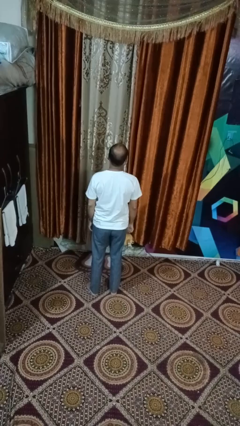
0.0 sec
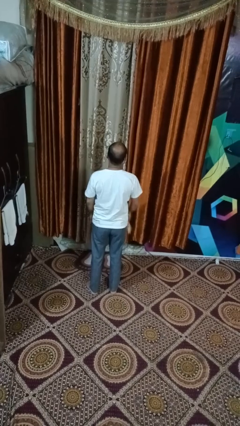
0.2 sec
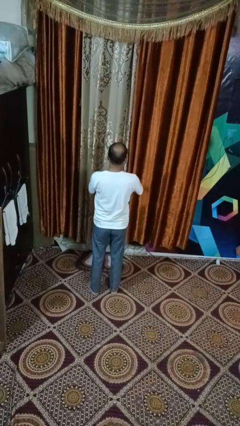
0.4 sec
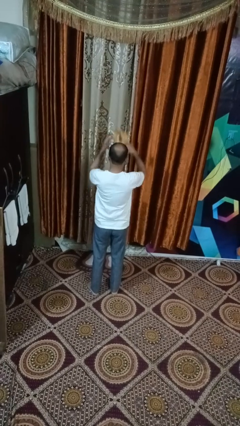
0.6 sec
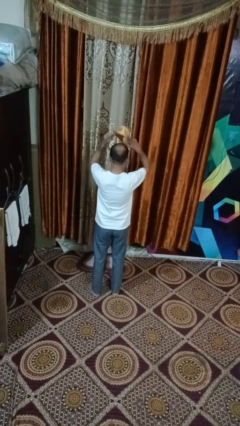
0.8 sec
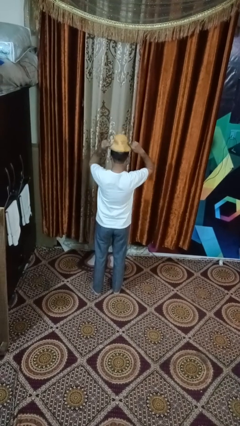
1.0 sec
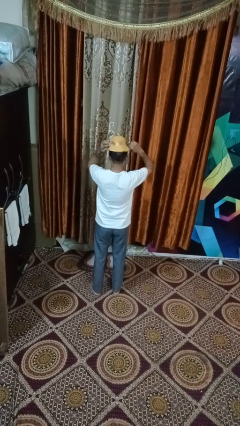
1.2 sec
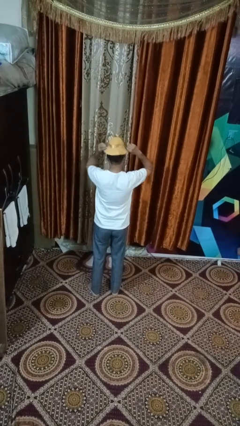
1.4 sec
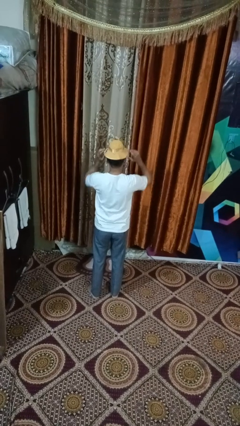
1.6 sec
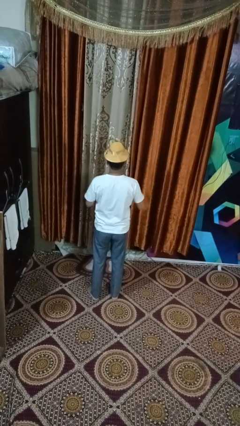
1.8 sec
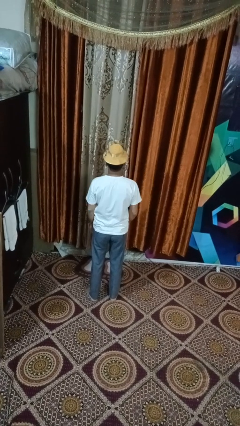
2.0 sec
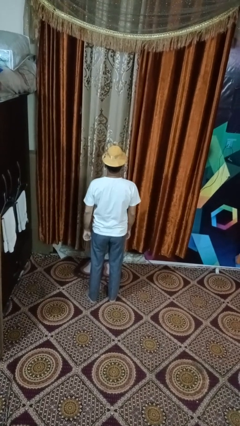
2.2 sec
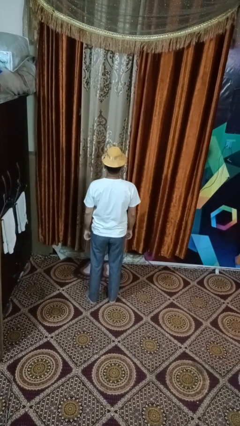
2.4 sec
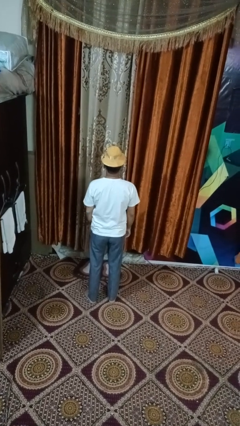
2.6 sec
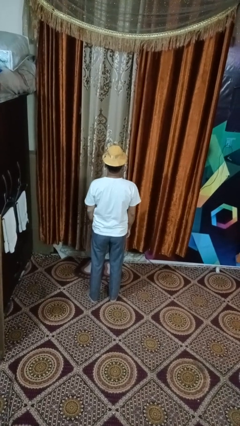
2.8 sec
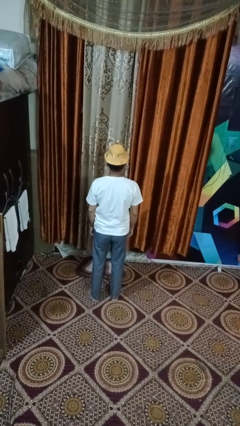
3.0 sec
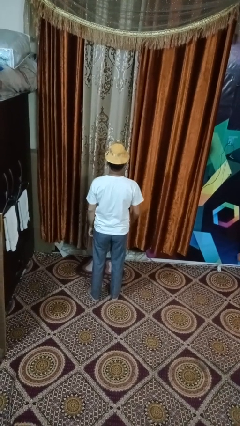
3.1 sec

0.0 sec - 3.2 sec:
person puts on hat

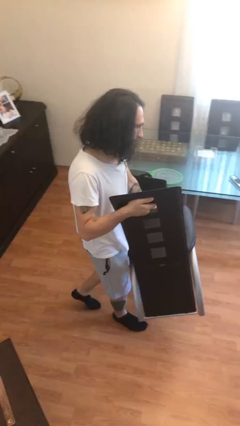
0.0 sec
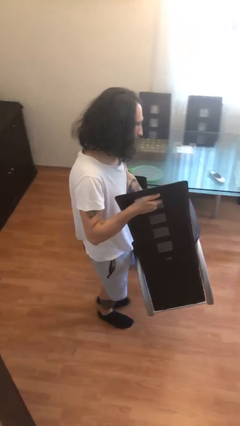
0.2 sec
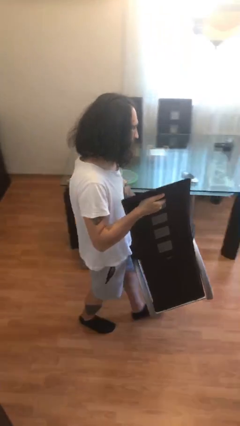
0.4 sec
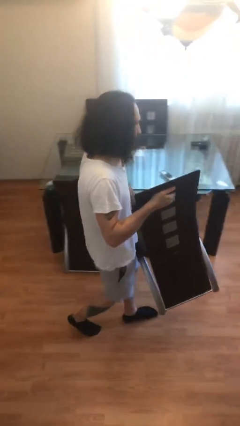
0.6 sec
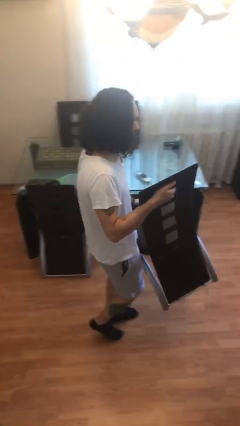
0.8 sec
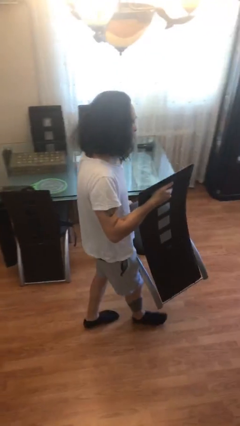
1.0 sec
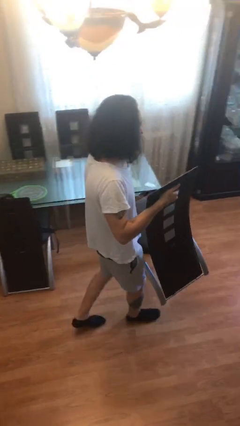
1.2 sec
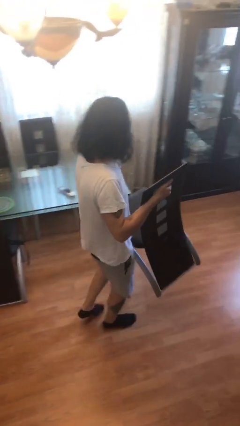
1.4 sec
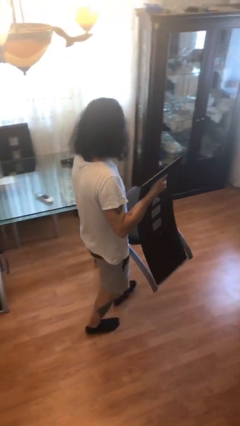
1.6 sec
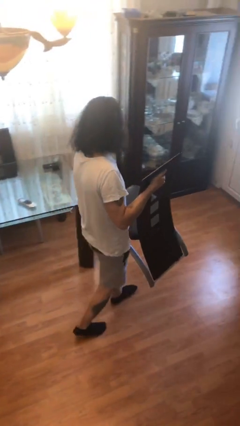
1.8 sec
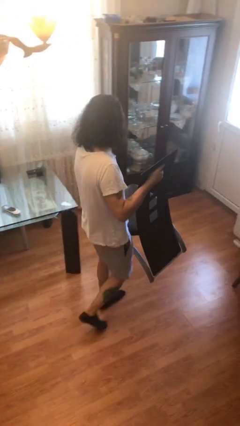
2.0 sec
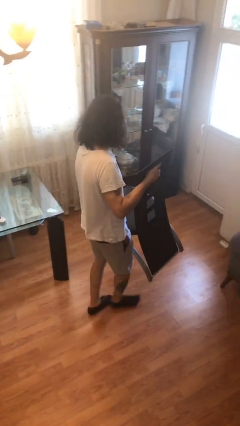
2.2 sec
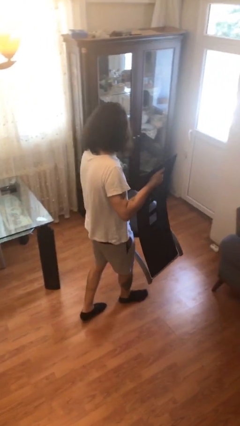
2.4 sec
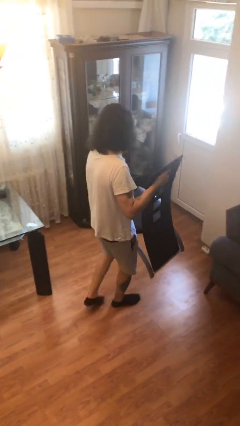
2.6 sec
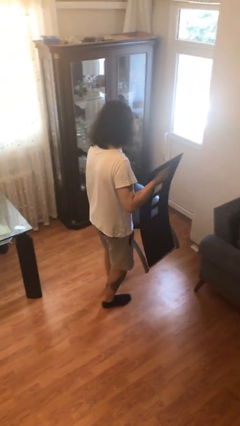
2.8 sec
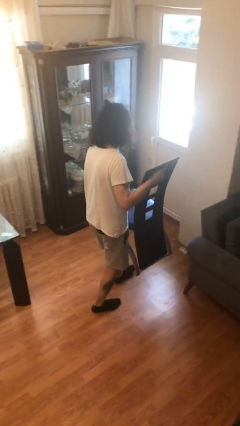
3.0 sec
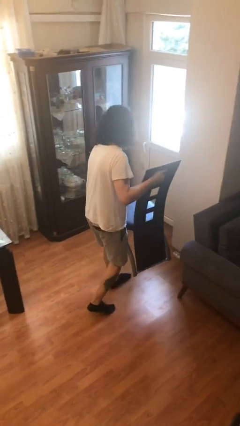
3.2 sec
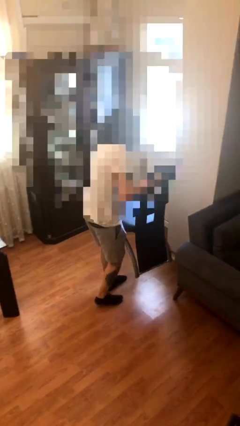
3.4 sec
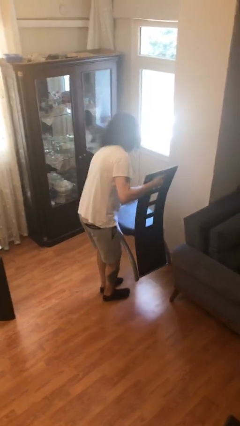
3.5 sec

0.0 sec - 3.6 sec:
person carries heavy object

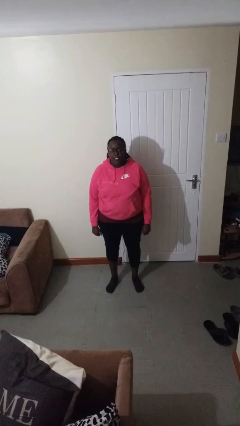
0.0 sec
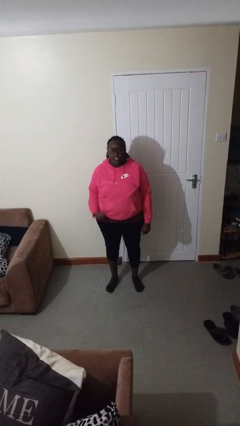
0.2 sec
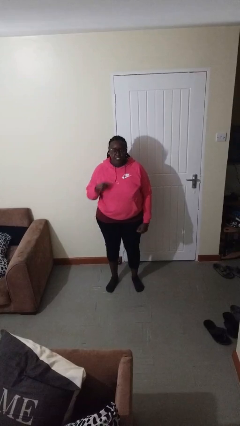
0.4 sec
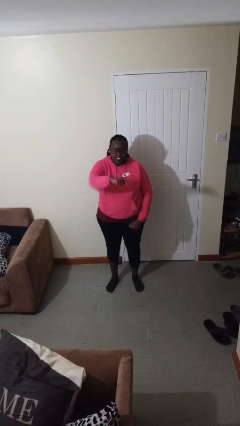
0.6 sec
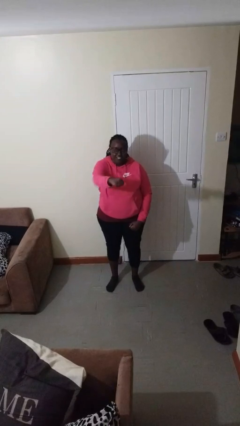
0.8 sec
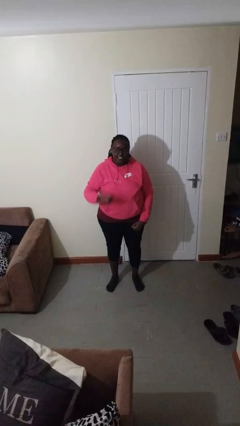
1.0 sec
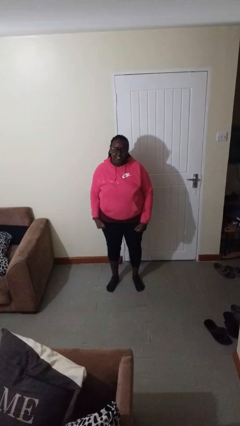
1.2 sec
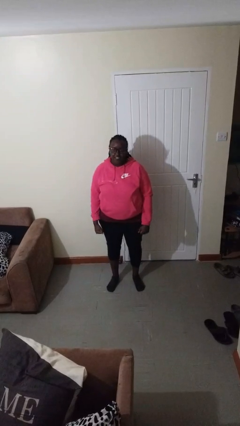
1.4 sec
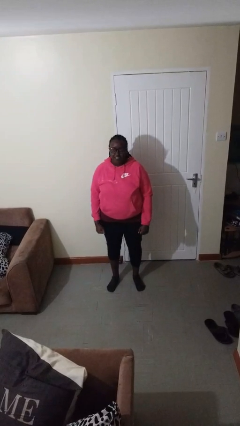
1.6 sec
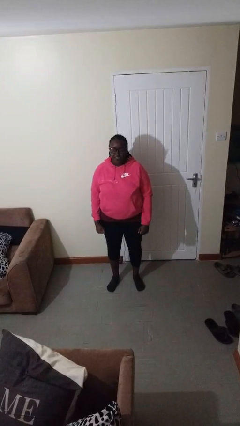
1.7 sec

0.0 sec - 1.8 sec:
person punches

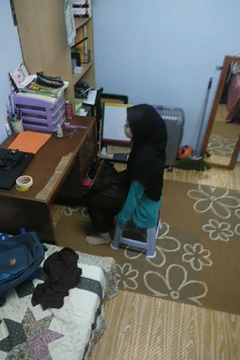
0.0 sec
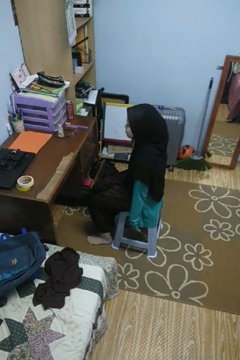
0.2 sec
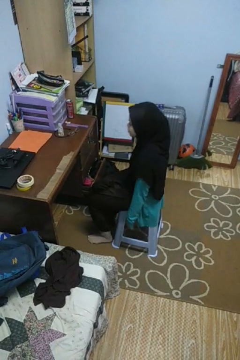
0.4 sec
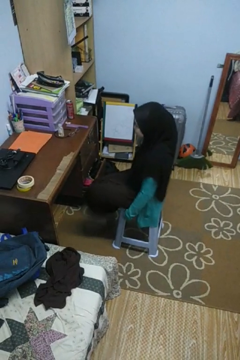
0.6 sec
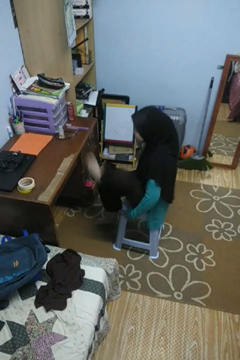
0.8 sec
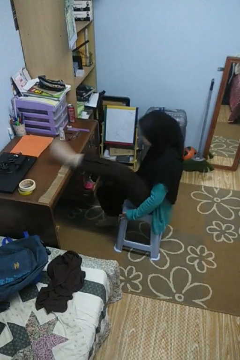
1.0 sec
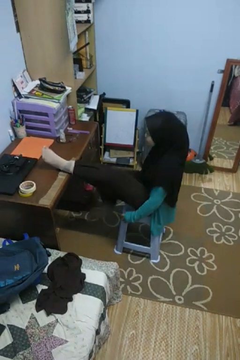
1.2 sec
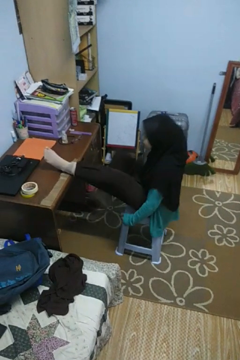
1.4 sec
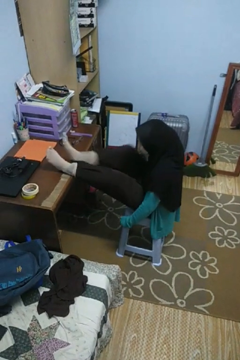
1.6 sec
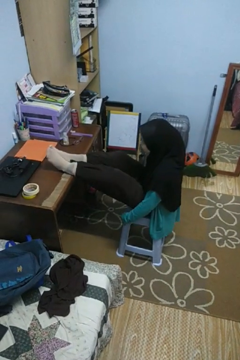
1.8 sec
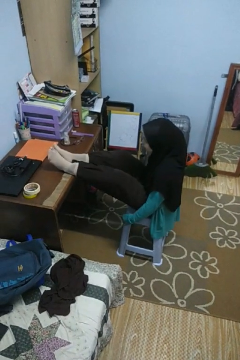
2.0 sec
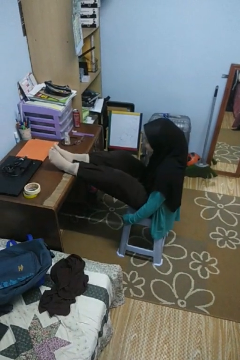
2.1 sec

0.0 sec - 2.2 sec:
person puts feet up

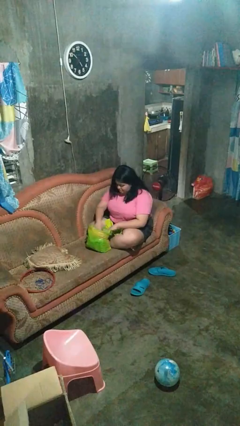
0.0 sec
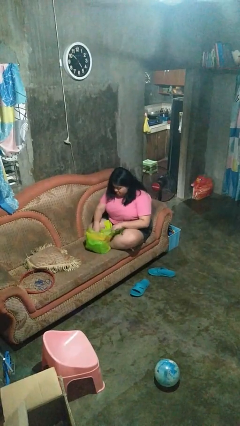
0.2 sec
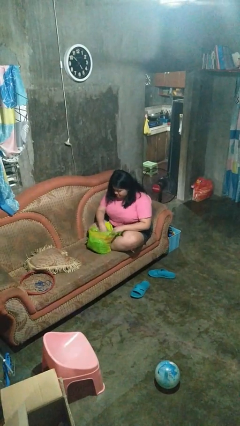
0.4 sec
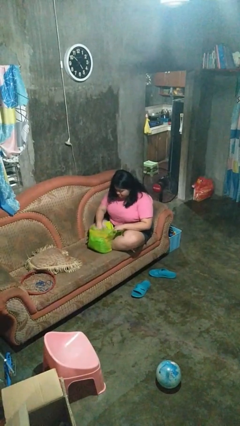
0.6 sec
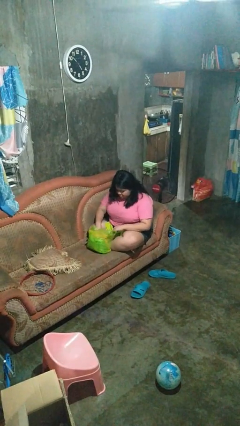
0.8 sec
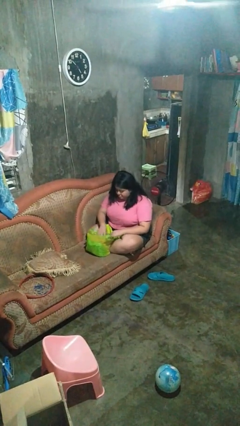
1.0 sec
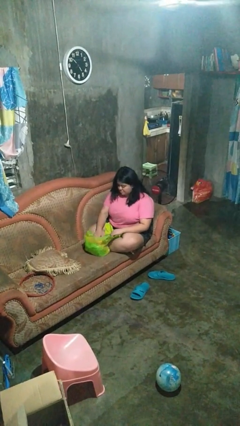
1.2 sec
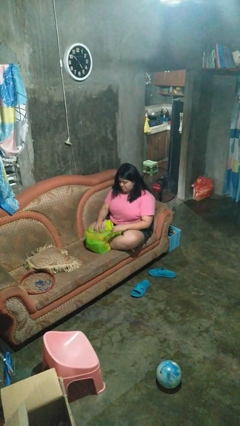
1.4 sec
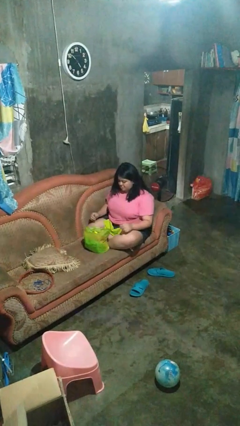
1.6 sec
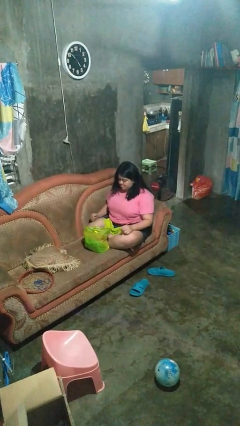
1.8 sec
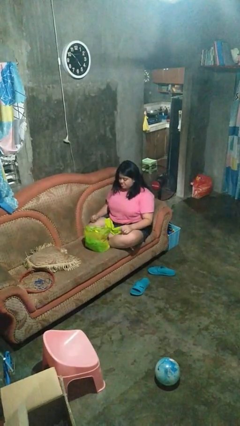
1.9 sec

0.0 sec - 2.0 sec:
person searches in bag

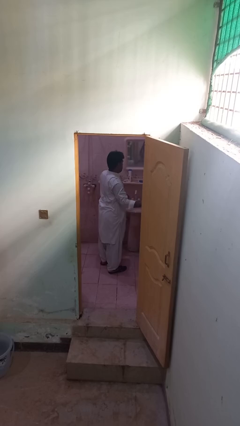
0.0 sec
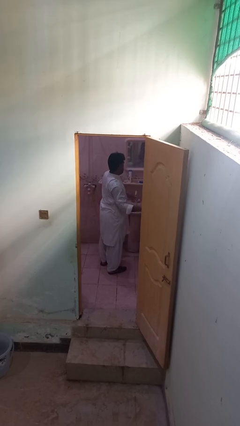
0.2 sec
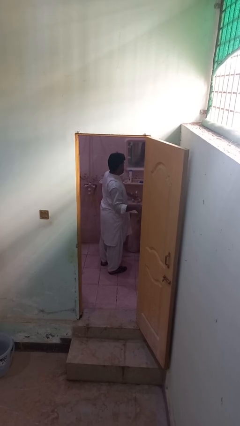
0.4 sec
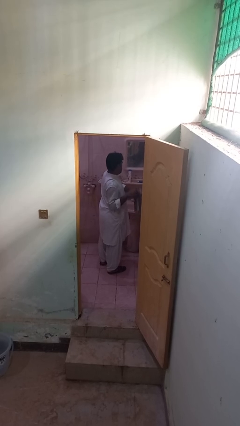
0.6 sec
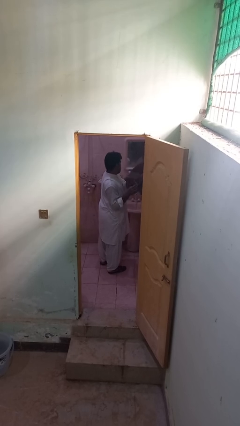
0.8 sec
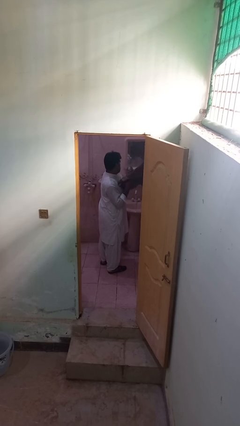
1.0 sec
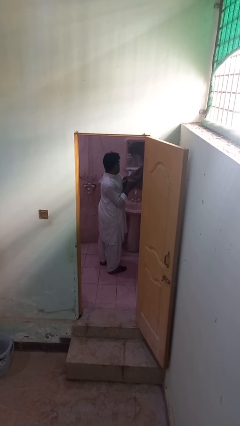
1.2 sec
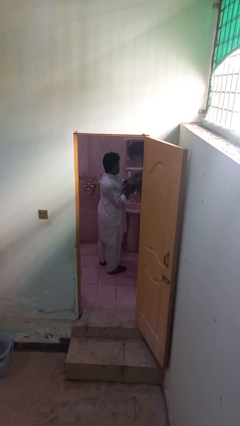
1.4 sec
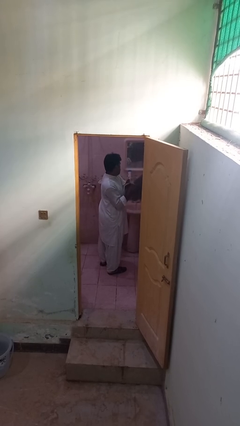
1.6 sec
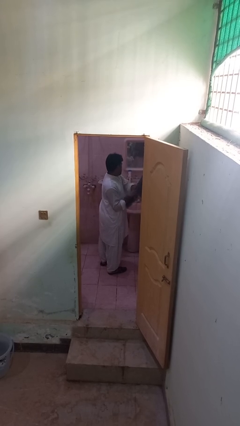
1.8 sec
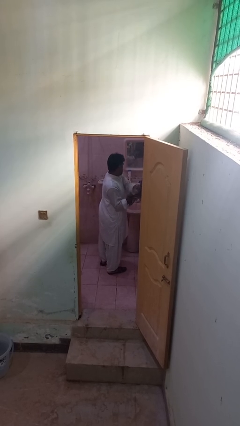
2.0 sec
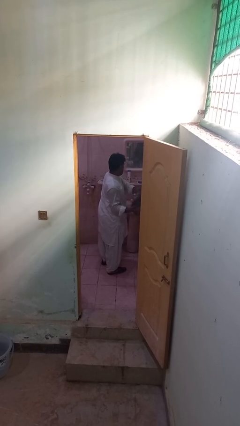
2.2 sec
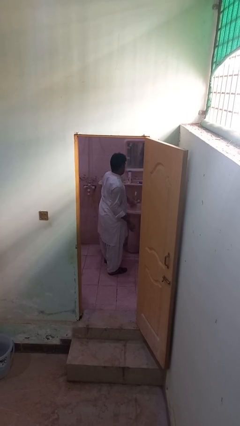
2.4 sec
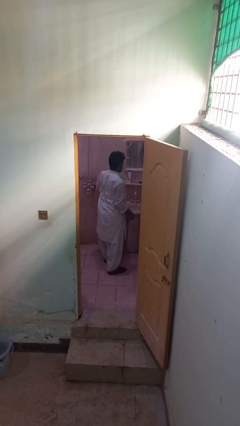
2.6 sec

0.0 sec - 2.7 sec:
person dries hands with towel

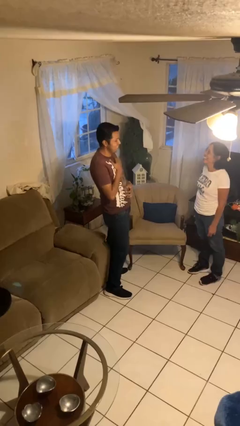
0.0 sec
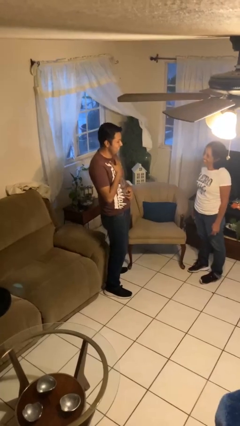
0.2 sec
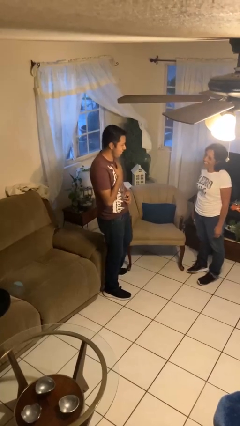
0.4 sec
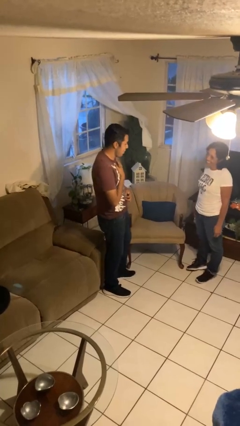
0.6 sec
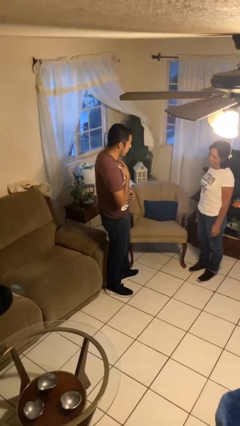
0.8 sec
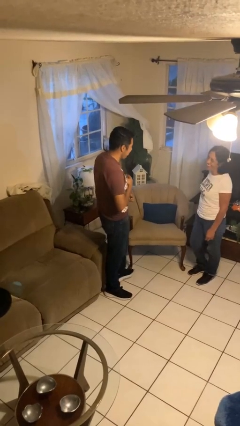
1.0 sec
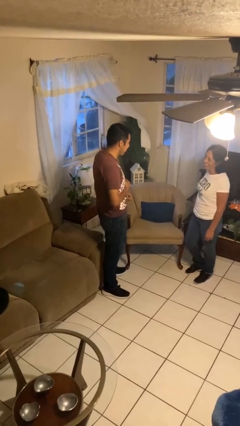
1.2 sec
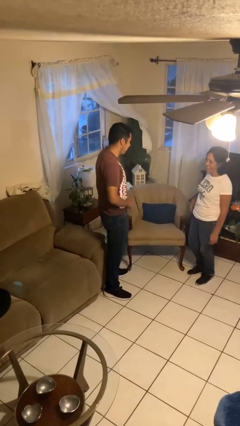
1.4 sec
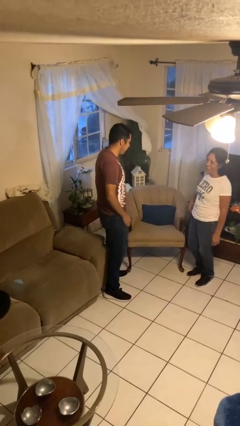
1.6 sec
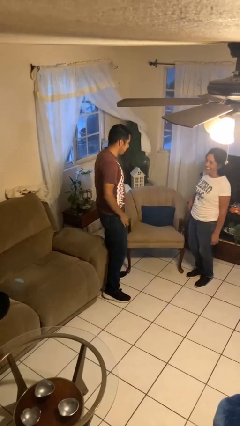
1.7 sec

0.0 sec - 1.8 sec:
person laughs with person

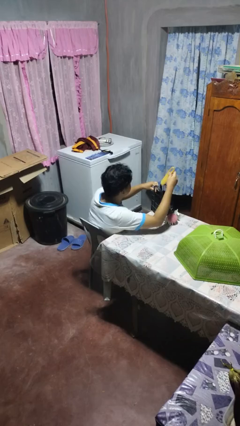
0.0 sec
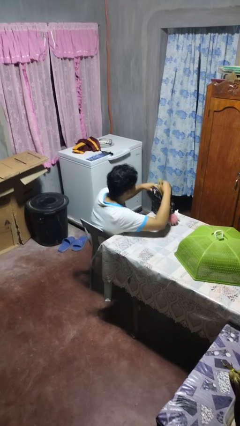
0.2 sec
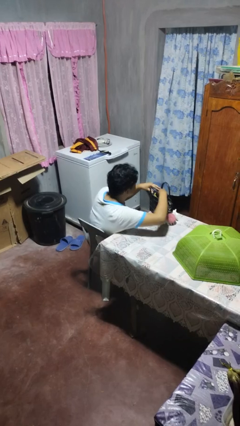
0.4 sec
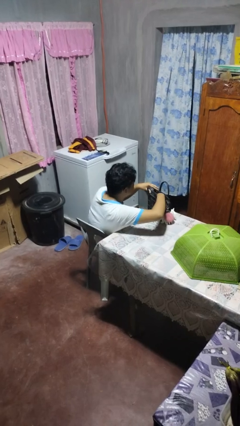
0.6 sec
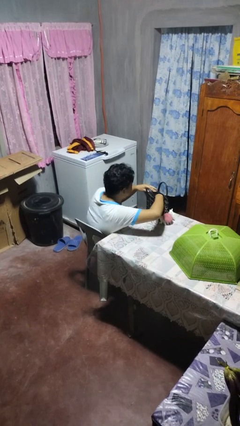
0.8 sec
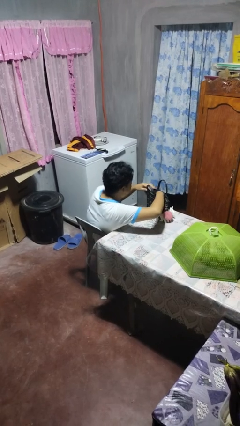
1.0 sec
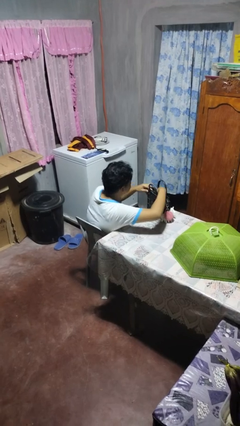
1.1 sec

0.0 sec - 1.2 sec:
person puts object into purse
